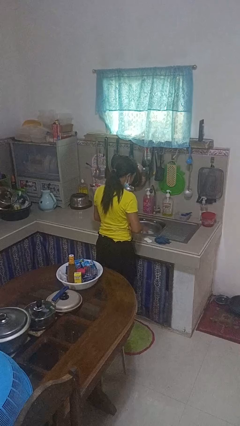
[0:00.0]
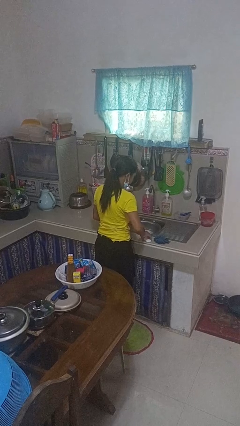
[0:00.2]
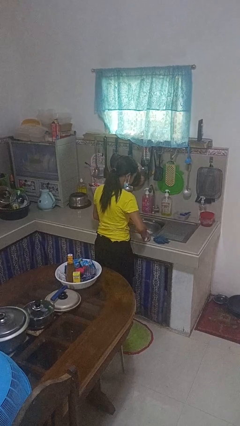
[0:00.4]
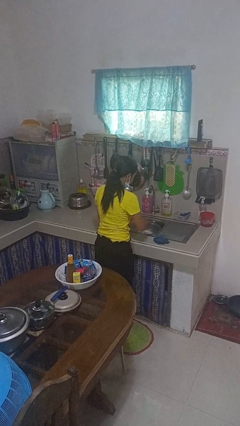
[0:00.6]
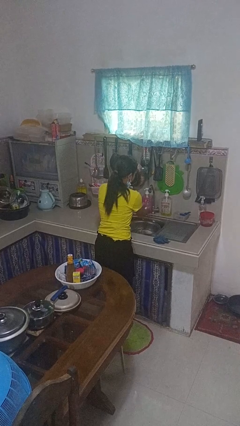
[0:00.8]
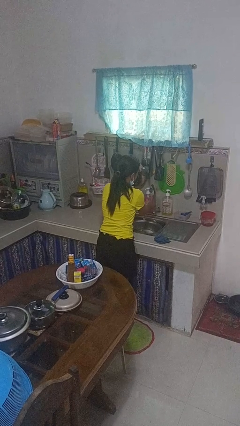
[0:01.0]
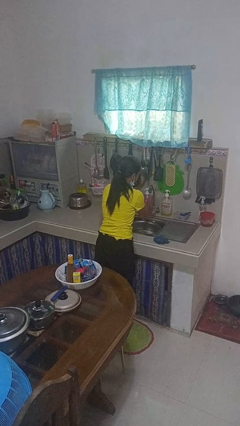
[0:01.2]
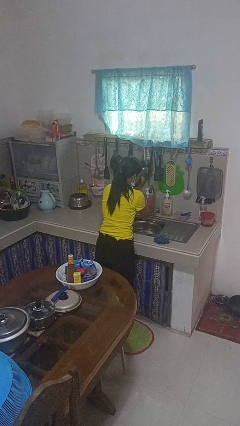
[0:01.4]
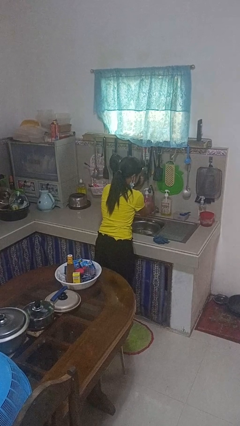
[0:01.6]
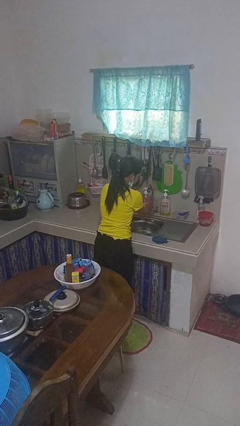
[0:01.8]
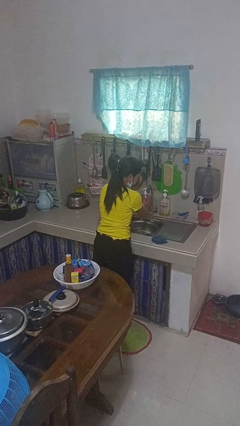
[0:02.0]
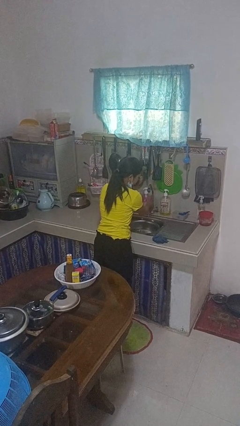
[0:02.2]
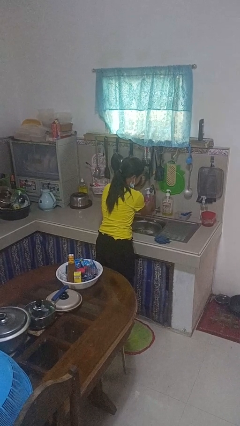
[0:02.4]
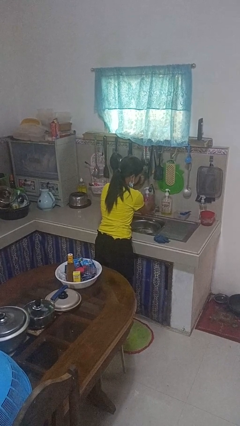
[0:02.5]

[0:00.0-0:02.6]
person washes hands

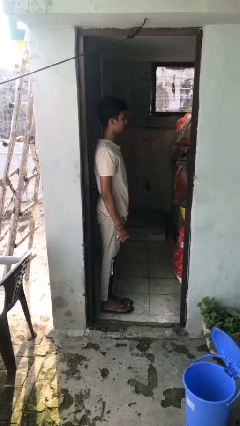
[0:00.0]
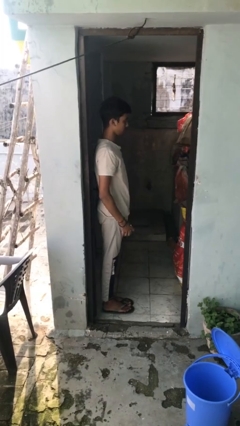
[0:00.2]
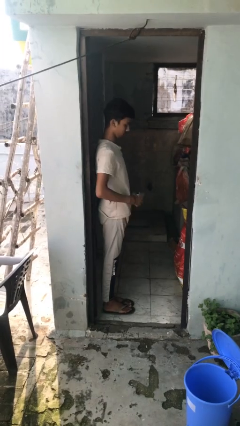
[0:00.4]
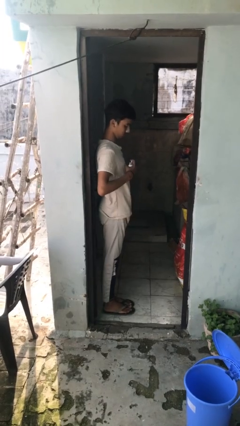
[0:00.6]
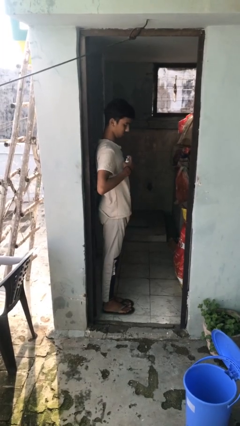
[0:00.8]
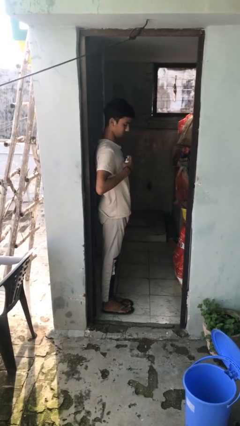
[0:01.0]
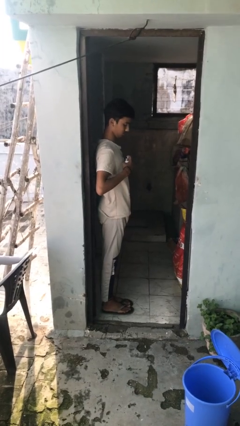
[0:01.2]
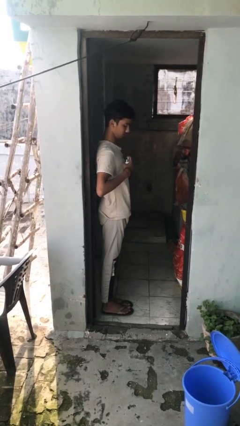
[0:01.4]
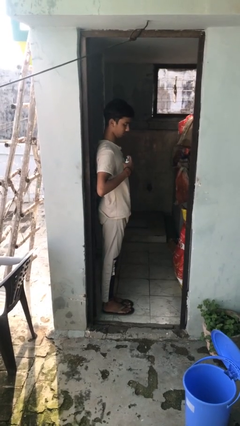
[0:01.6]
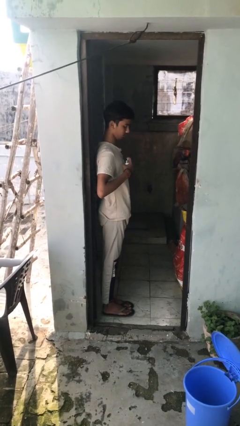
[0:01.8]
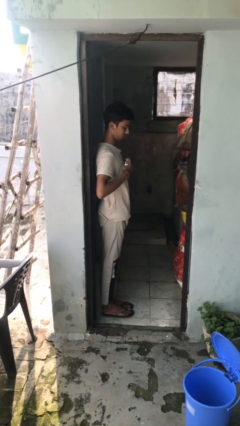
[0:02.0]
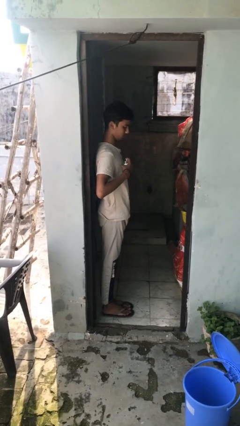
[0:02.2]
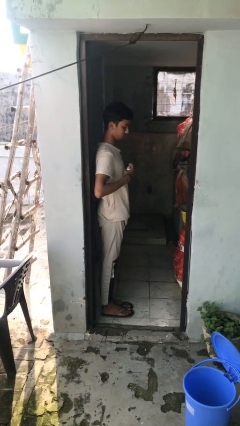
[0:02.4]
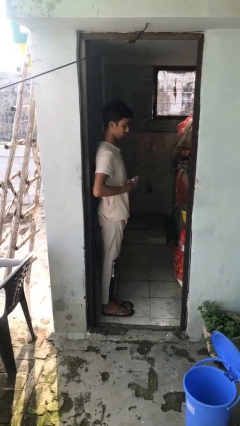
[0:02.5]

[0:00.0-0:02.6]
person applies deodorant

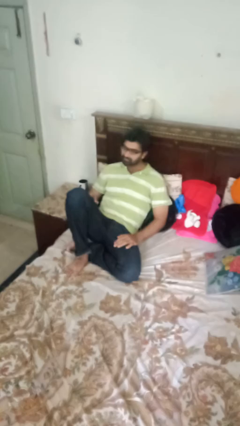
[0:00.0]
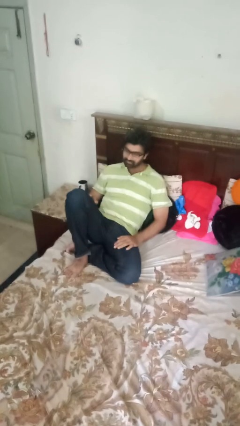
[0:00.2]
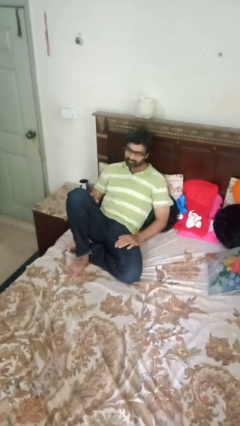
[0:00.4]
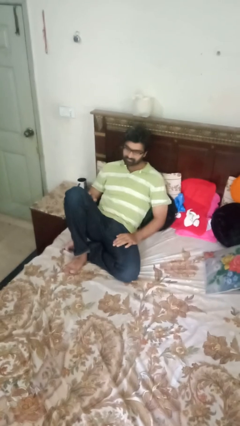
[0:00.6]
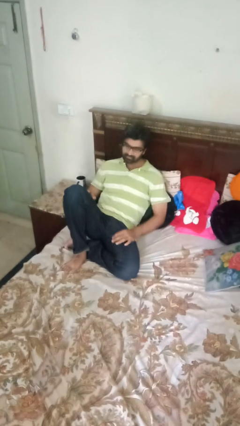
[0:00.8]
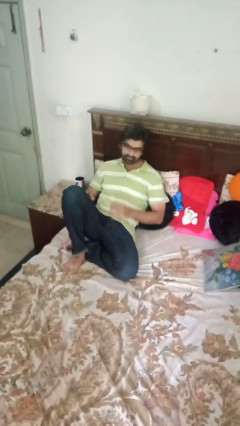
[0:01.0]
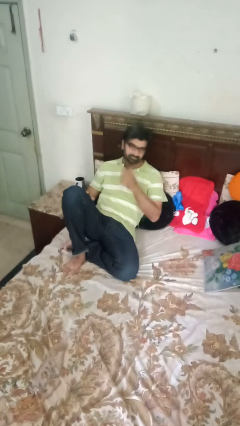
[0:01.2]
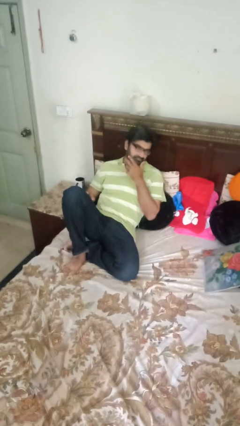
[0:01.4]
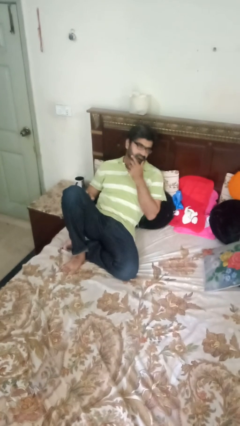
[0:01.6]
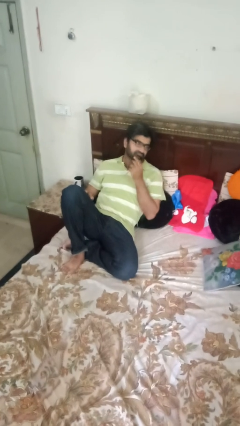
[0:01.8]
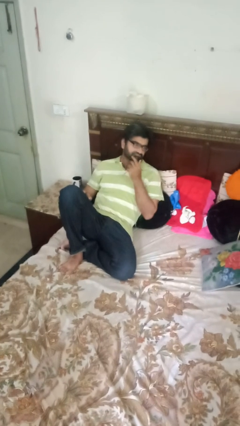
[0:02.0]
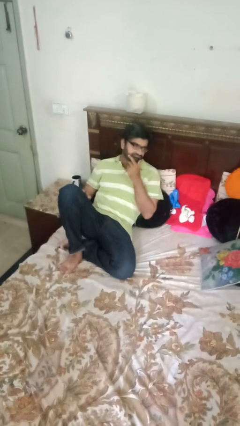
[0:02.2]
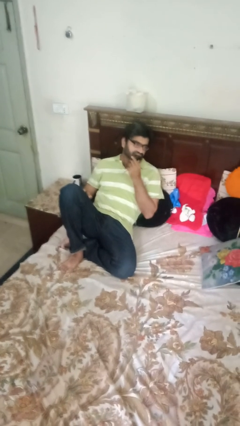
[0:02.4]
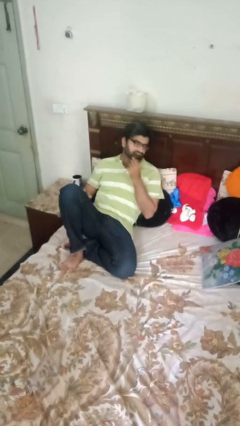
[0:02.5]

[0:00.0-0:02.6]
person strokes chin

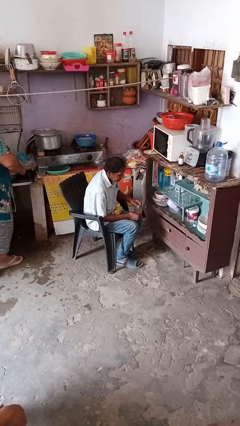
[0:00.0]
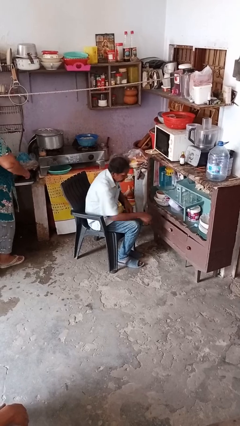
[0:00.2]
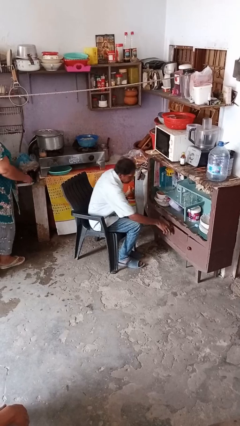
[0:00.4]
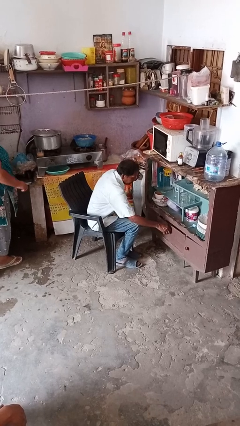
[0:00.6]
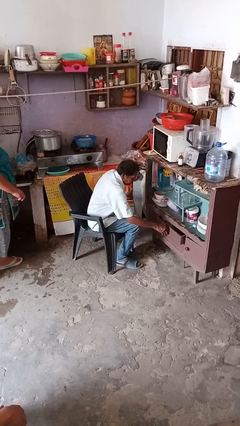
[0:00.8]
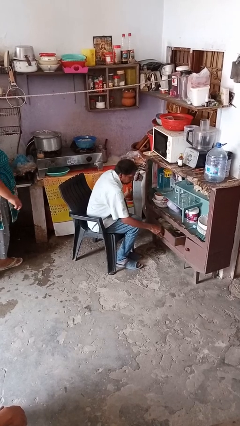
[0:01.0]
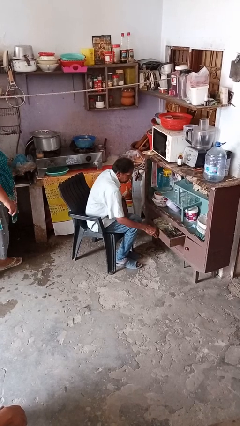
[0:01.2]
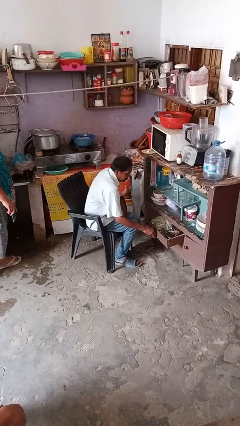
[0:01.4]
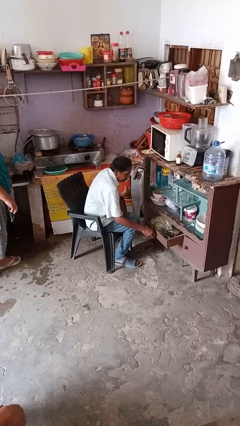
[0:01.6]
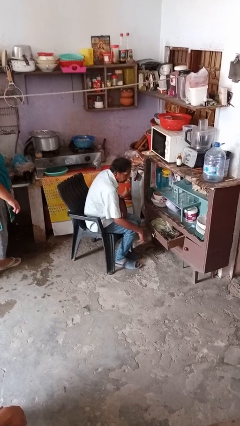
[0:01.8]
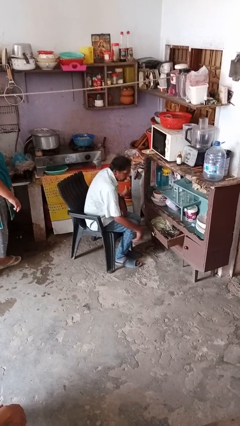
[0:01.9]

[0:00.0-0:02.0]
person opens dresser drawer

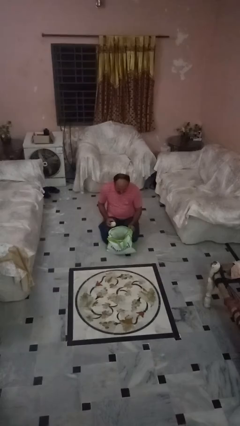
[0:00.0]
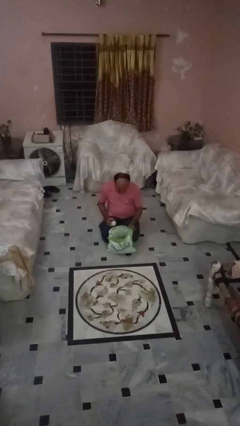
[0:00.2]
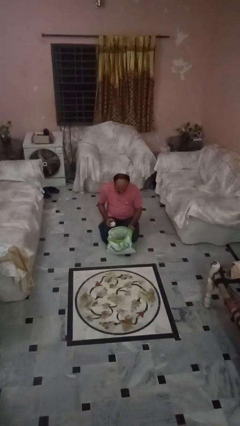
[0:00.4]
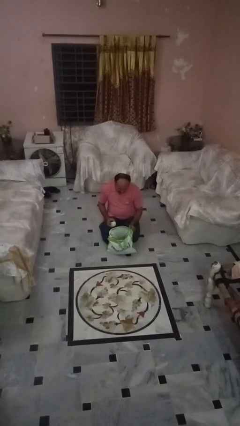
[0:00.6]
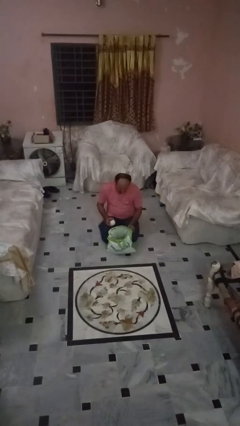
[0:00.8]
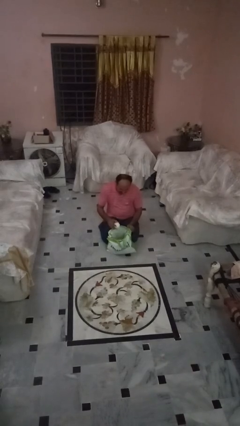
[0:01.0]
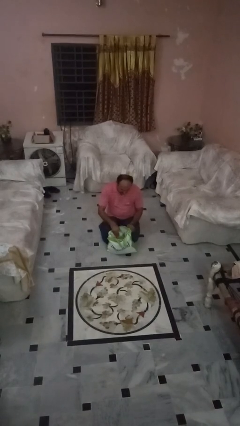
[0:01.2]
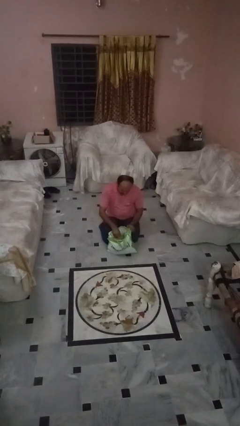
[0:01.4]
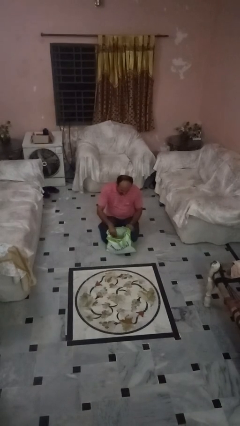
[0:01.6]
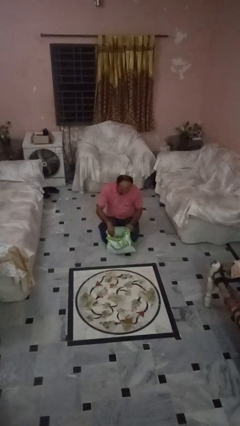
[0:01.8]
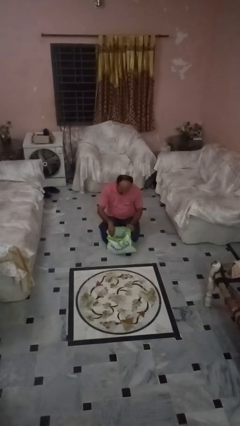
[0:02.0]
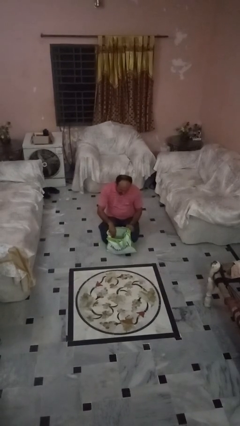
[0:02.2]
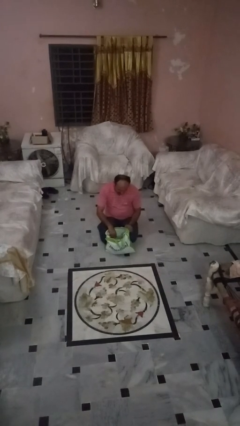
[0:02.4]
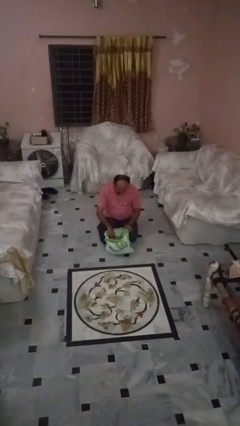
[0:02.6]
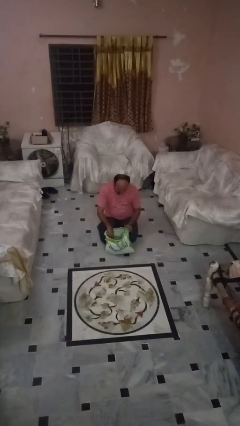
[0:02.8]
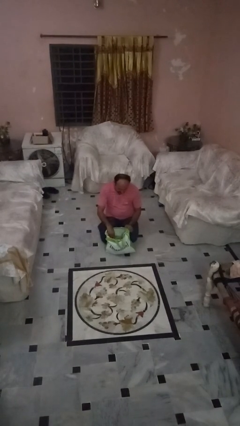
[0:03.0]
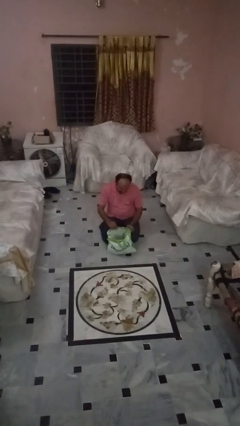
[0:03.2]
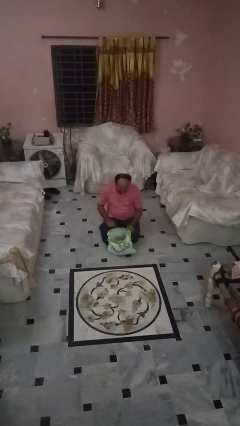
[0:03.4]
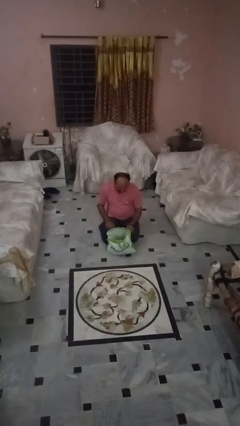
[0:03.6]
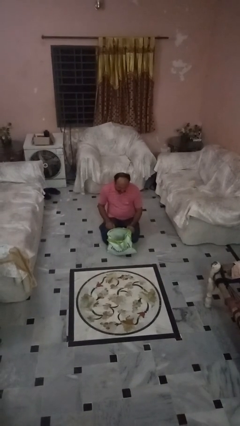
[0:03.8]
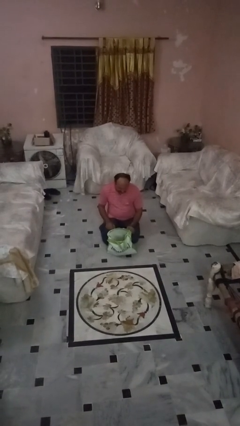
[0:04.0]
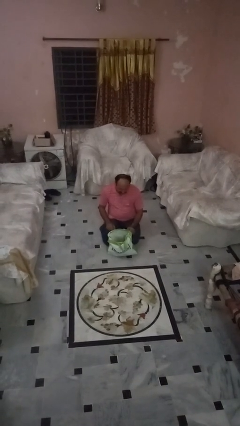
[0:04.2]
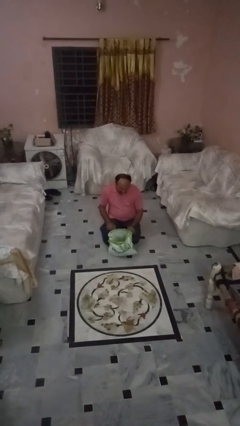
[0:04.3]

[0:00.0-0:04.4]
person puts object into bag

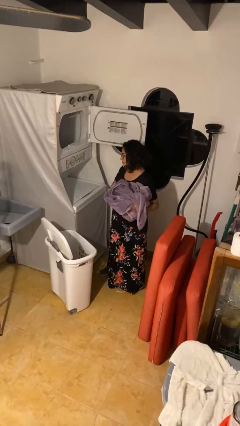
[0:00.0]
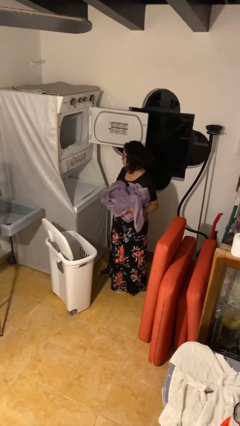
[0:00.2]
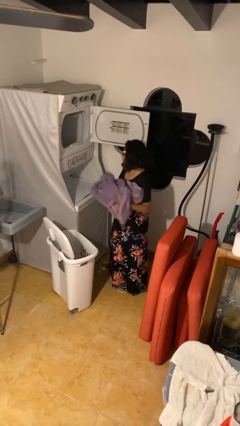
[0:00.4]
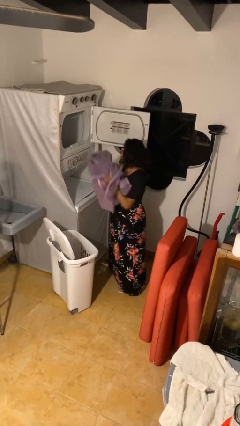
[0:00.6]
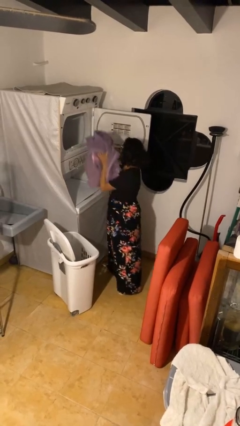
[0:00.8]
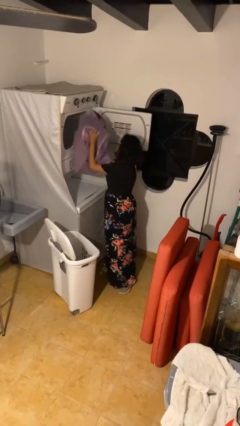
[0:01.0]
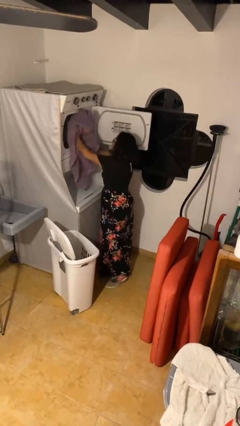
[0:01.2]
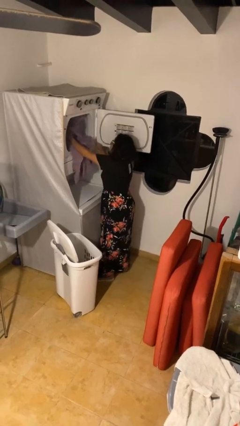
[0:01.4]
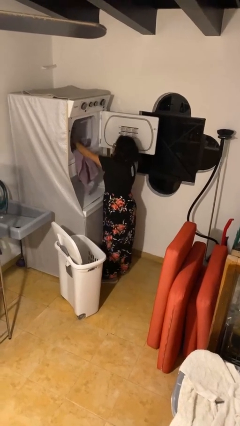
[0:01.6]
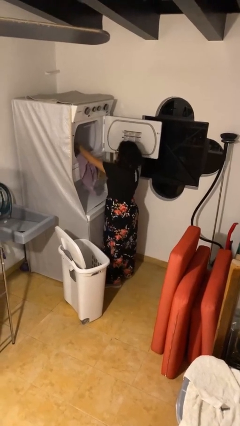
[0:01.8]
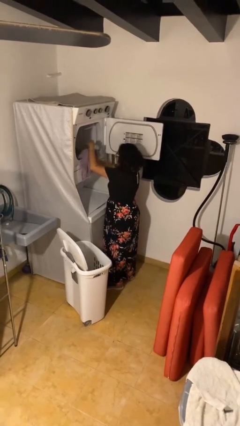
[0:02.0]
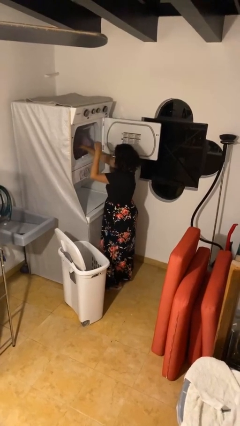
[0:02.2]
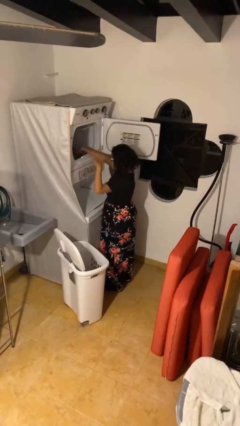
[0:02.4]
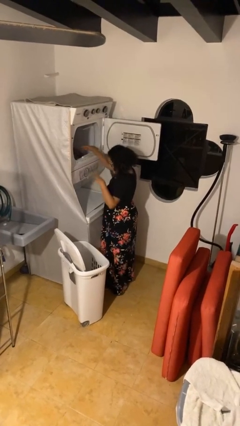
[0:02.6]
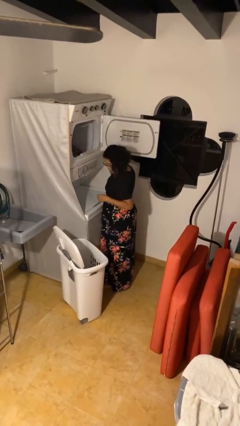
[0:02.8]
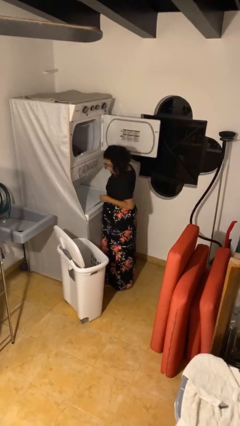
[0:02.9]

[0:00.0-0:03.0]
person loads dryer
